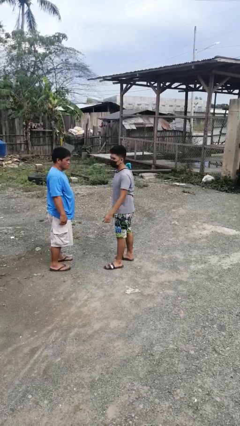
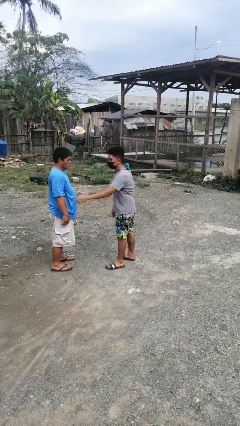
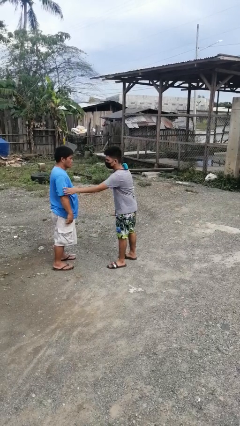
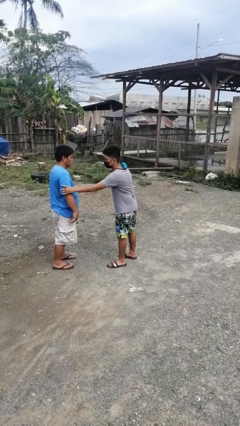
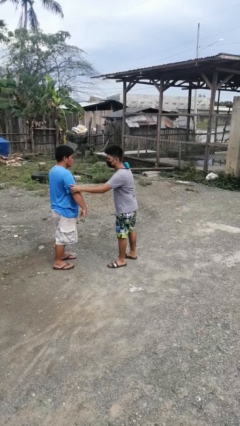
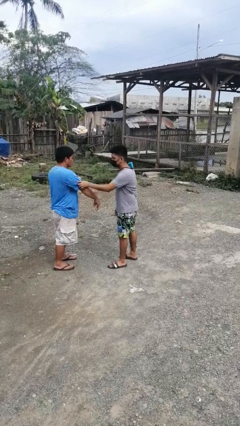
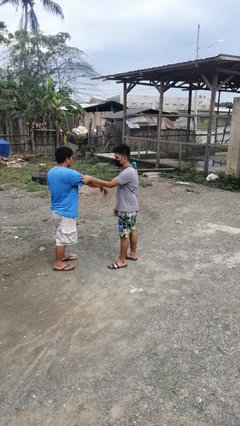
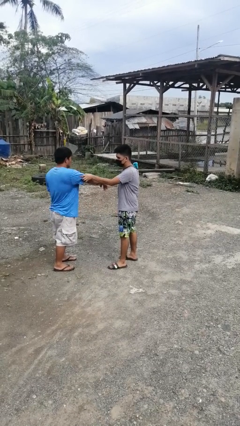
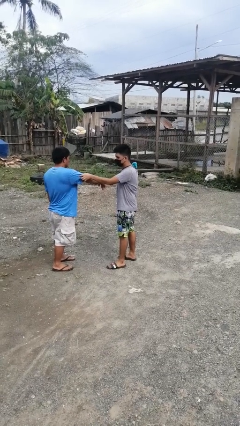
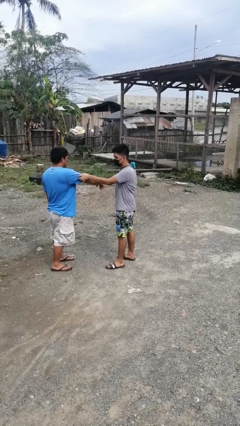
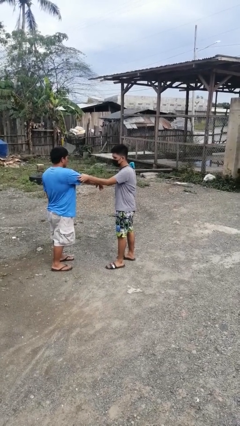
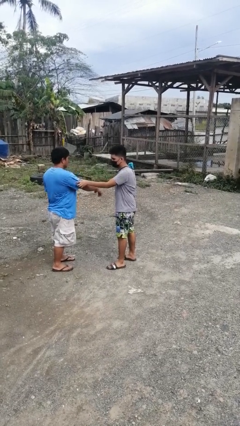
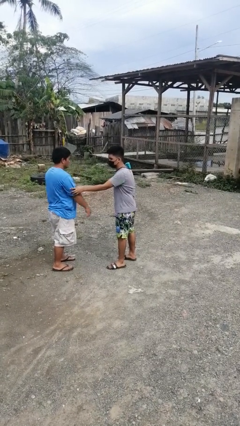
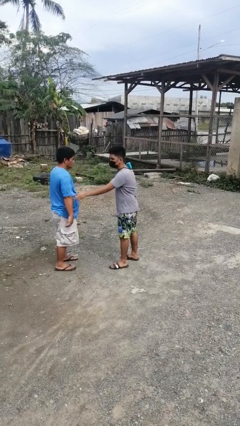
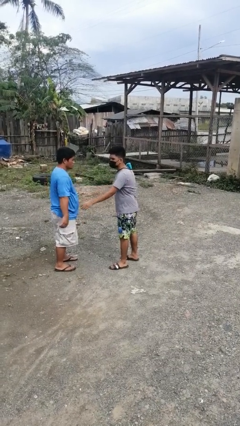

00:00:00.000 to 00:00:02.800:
person grabs person by bicep

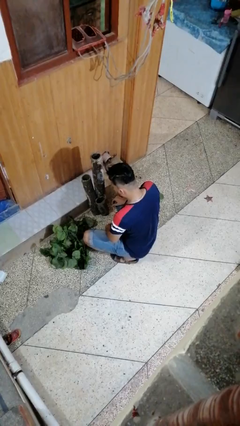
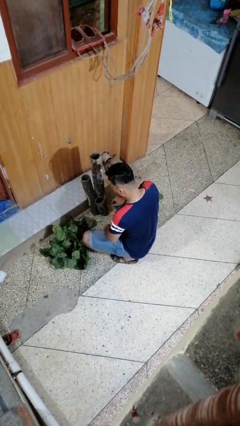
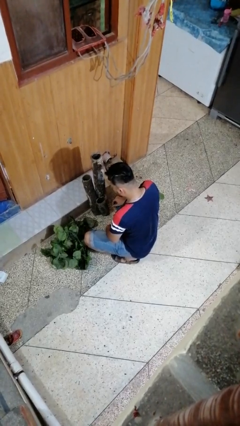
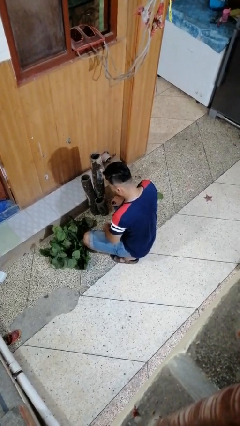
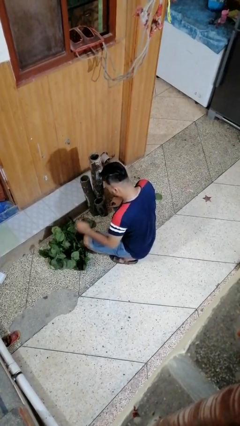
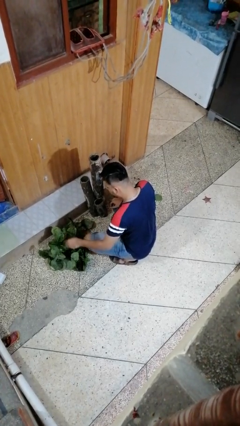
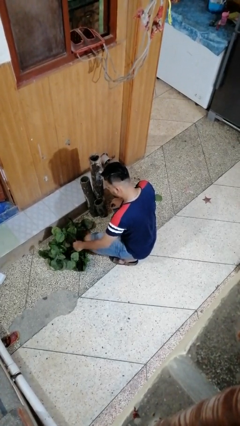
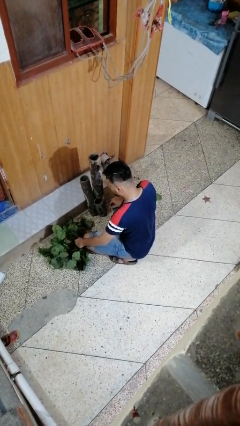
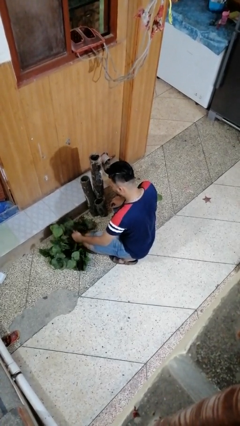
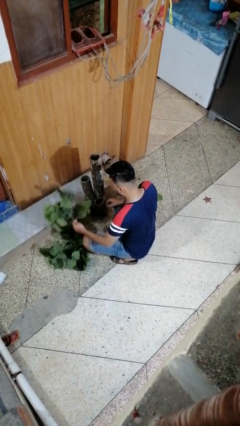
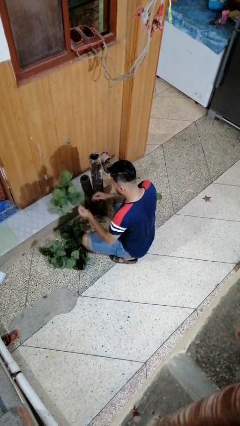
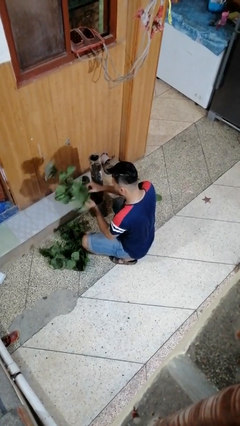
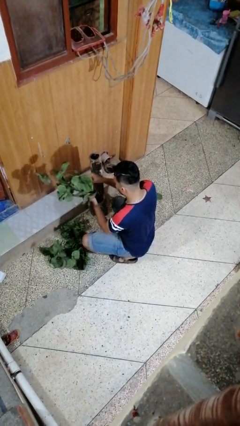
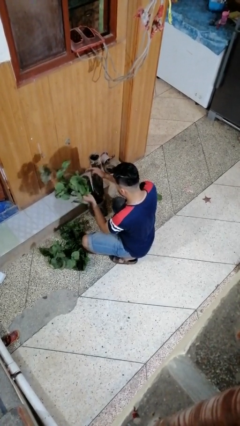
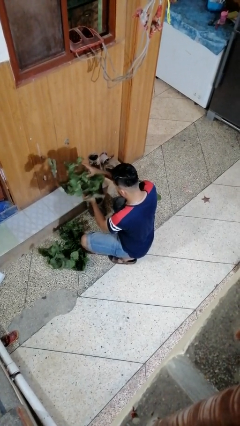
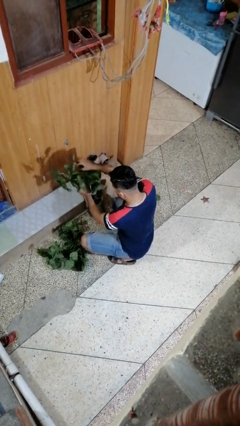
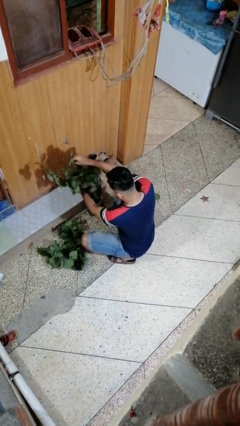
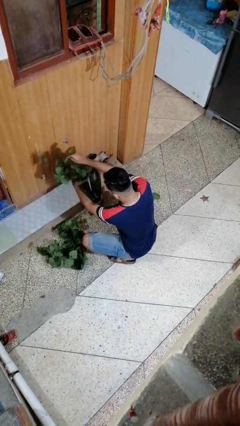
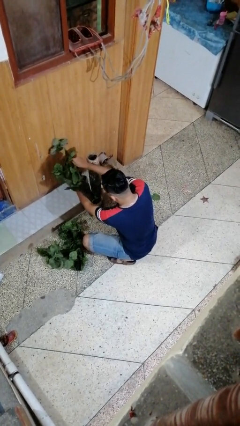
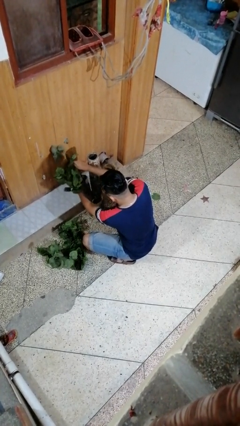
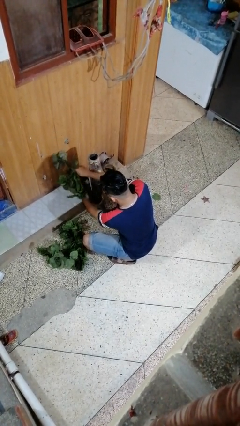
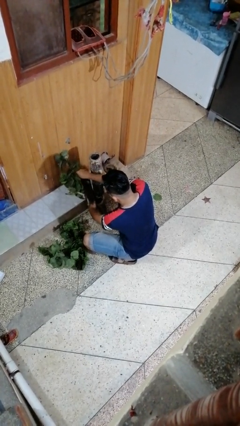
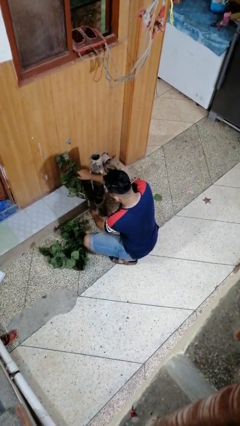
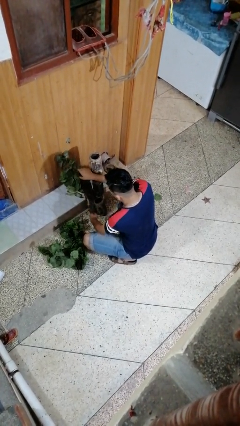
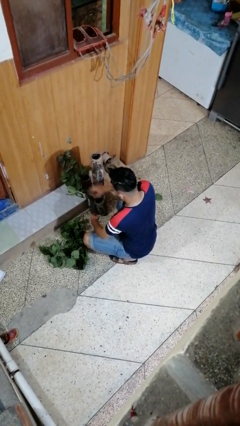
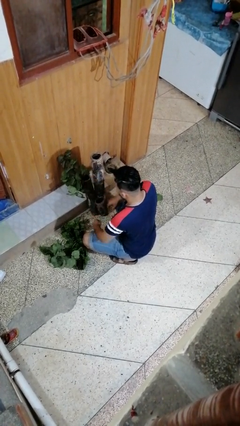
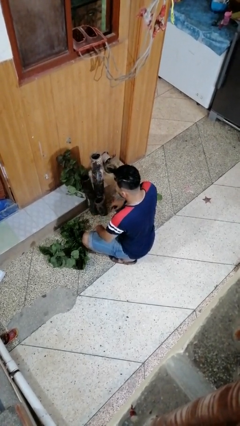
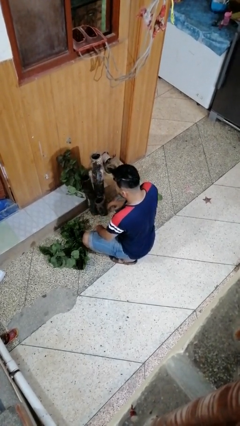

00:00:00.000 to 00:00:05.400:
person arranges flowers in vase

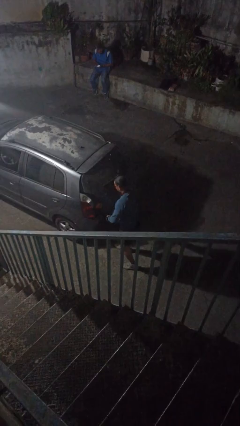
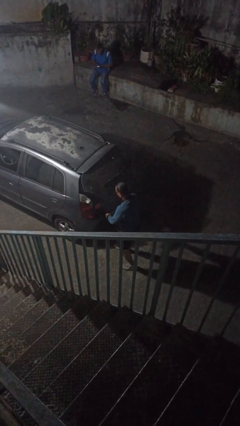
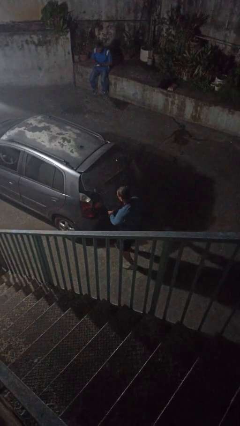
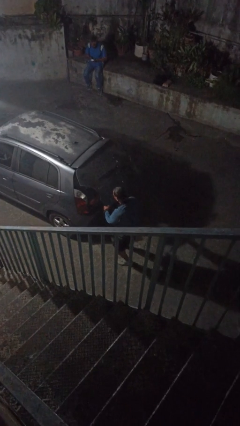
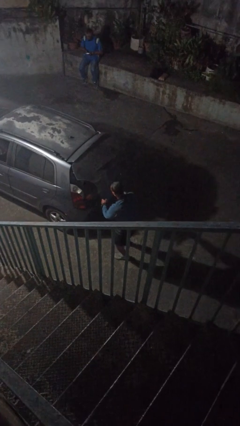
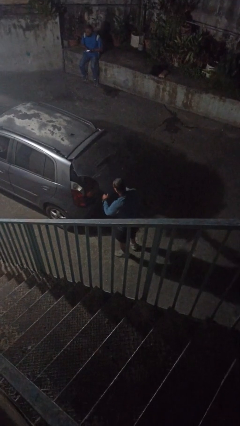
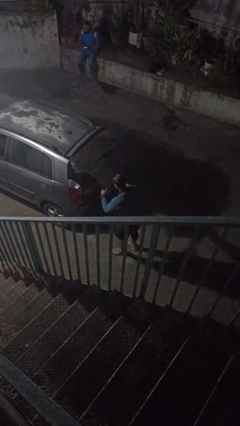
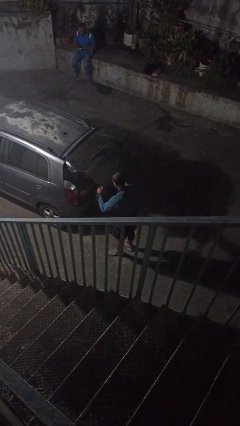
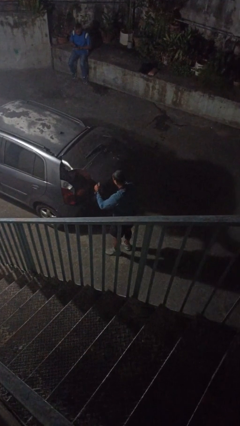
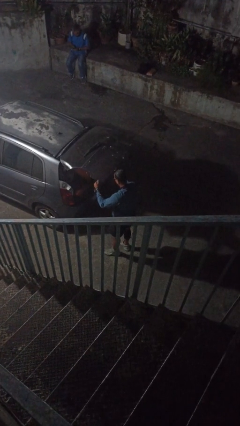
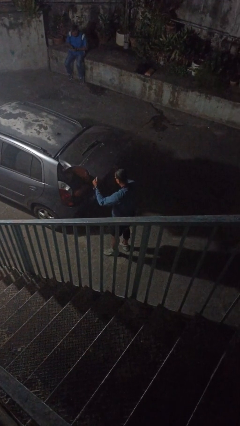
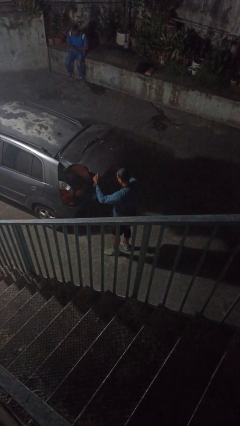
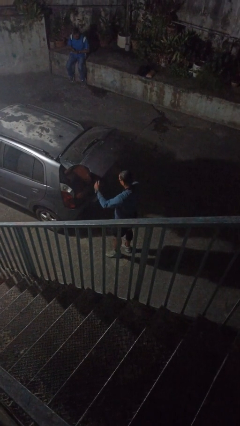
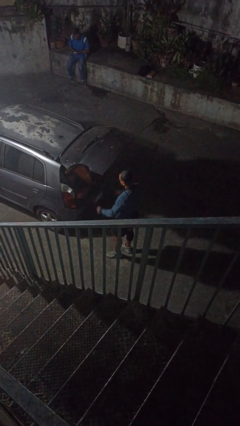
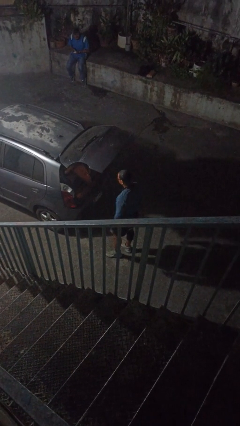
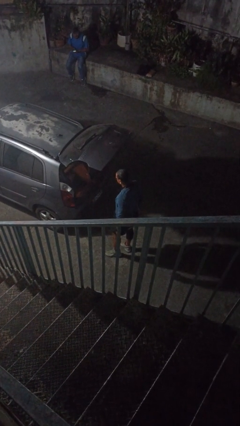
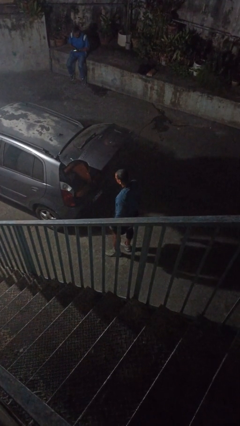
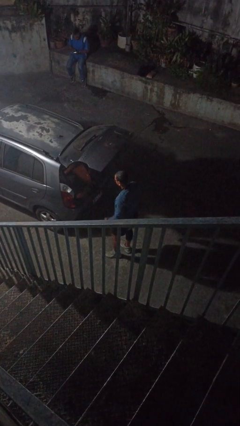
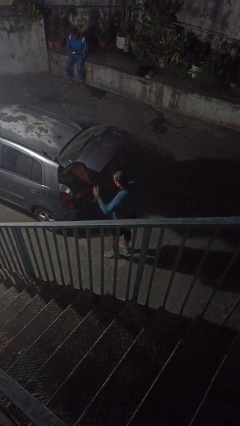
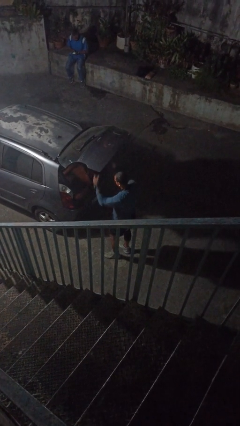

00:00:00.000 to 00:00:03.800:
person opens car trunk

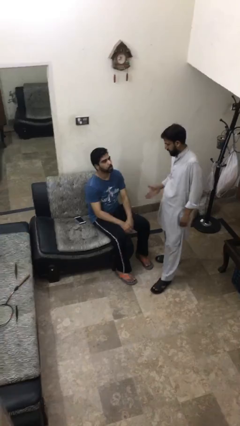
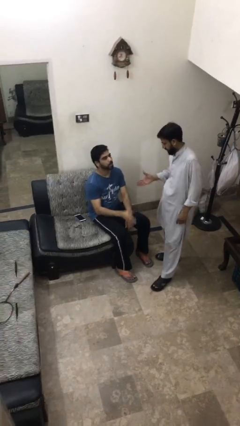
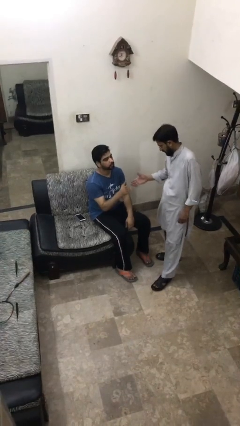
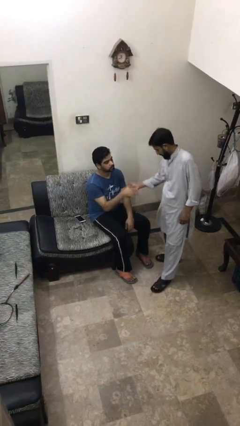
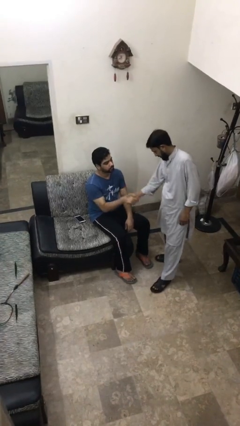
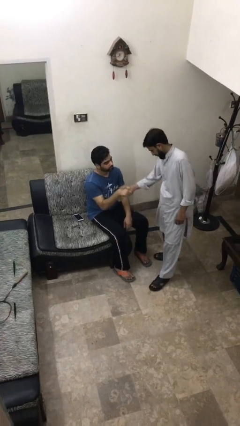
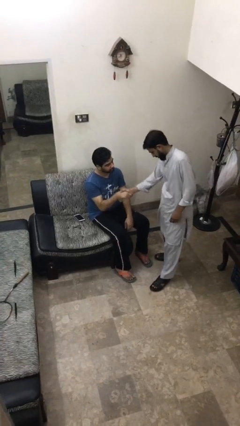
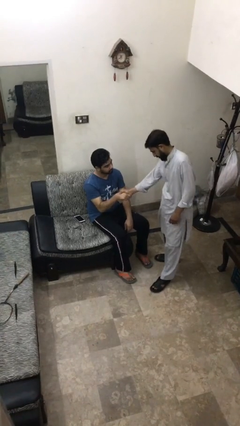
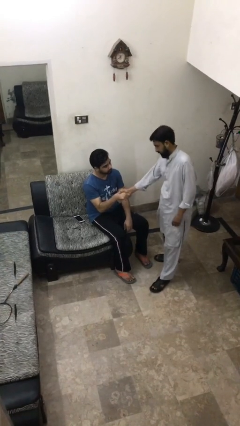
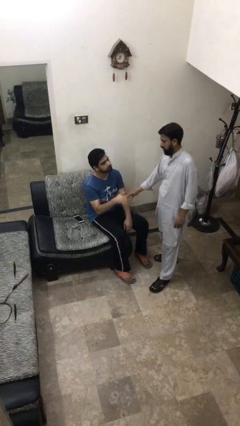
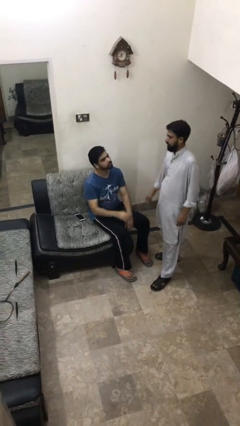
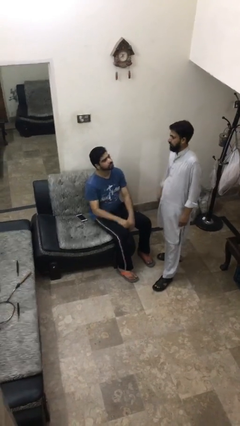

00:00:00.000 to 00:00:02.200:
person shakes hand

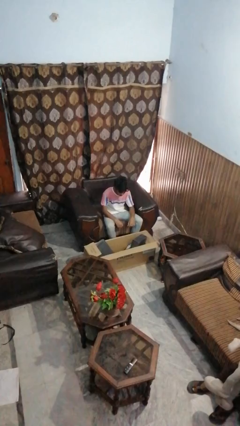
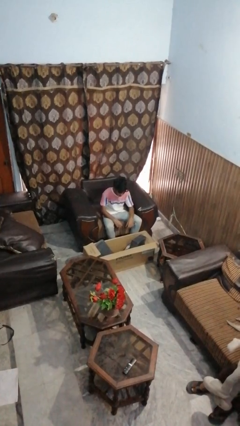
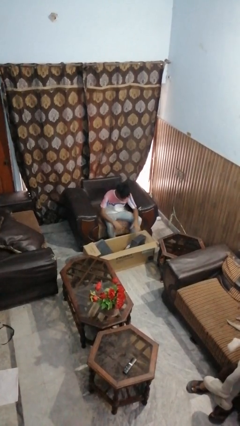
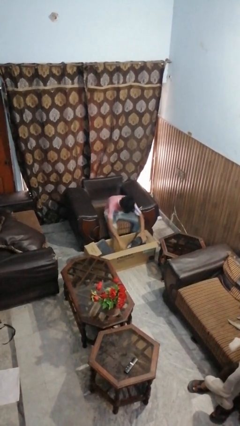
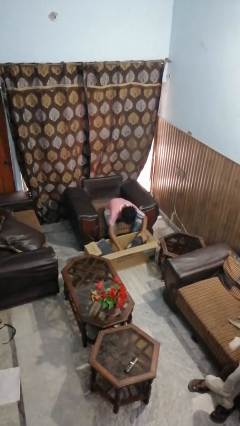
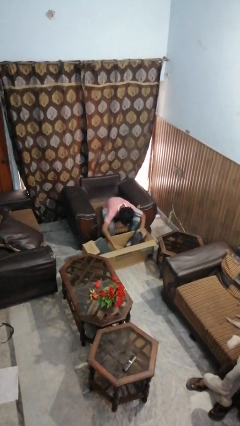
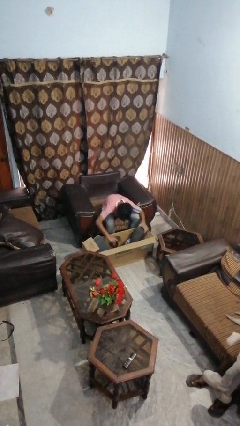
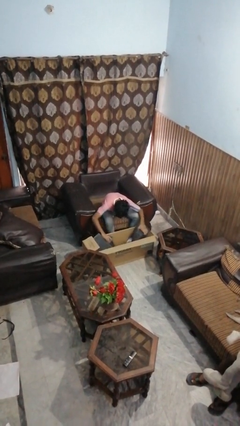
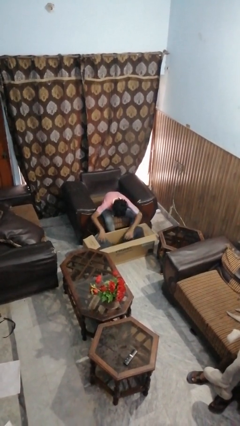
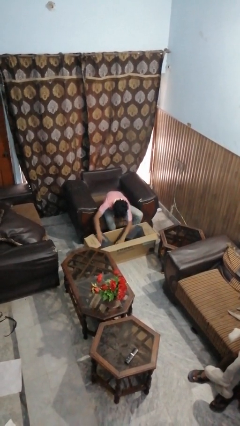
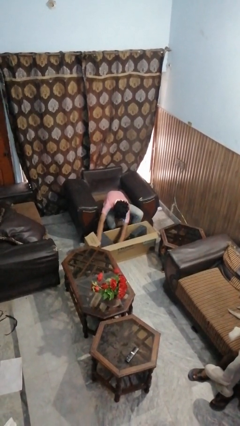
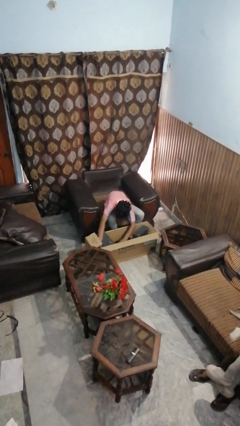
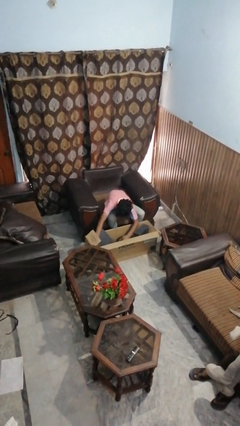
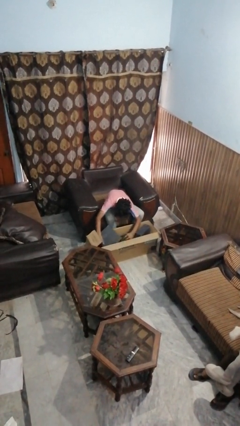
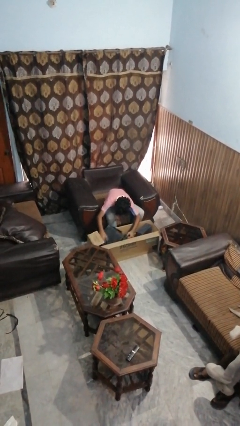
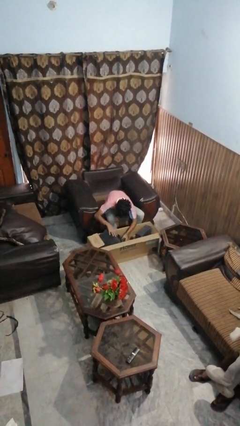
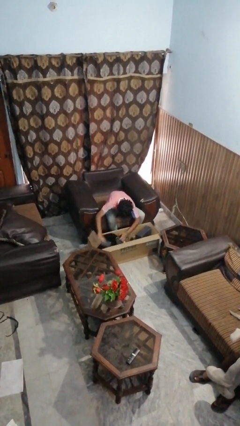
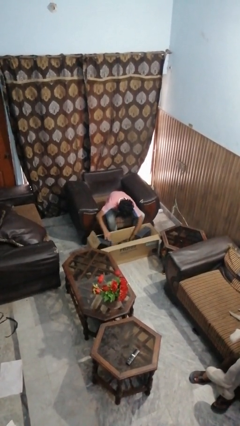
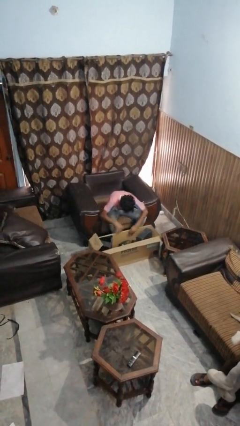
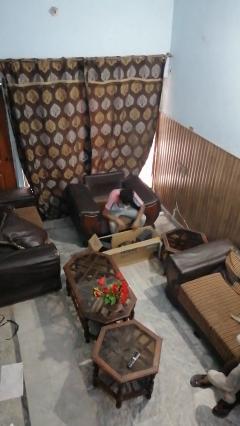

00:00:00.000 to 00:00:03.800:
person searches in box
